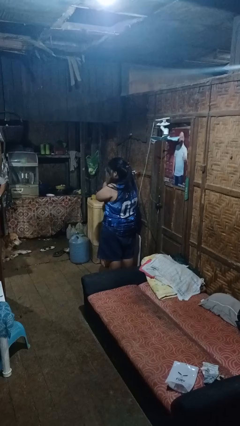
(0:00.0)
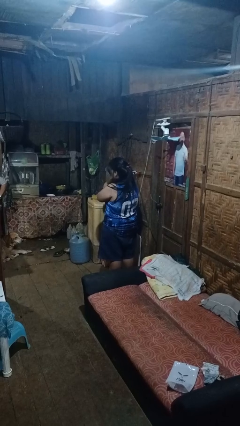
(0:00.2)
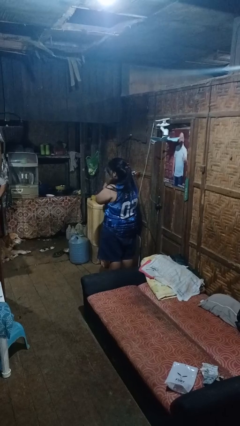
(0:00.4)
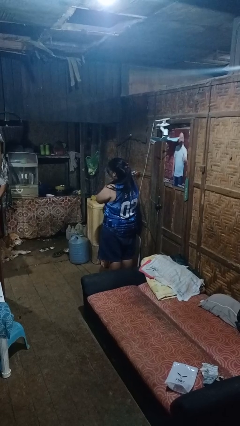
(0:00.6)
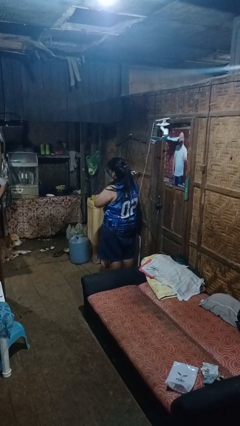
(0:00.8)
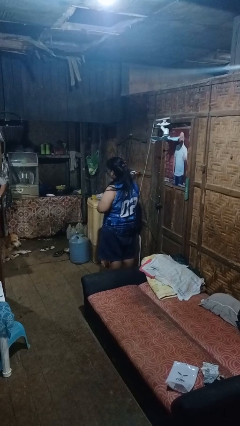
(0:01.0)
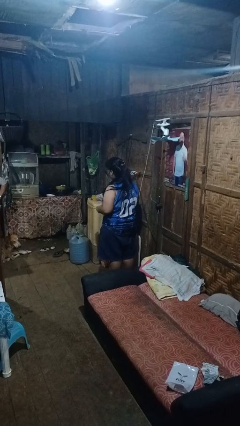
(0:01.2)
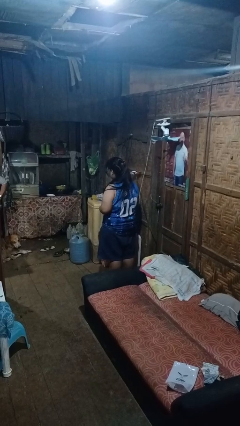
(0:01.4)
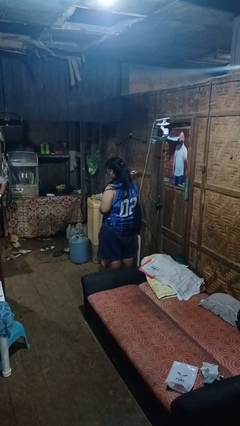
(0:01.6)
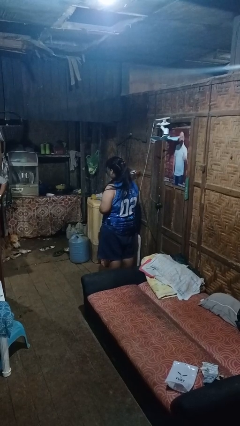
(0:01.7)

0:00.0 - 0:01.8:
person applies deodorant

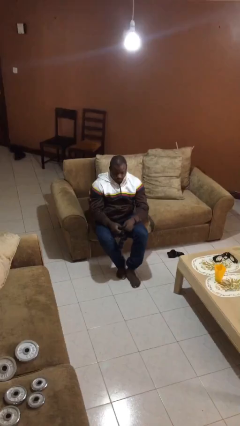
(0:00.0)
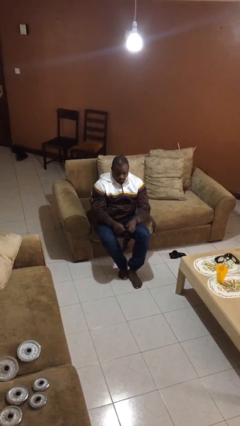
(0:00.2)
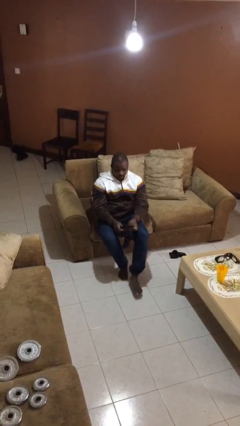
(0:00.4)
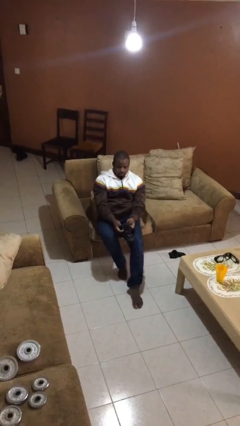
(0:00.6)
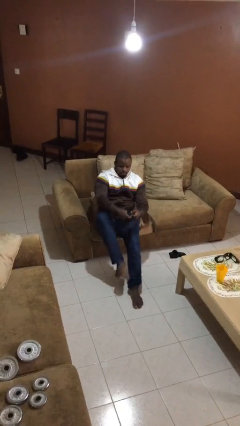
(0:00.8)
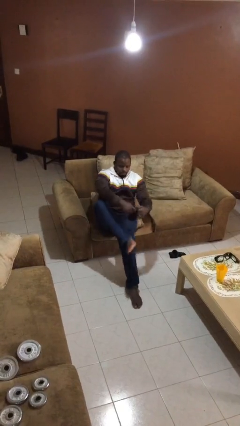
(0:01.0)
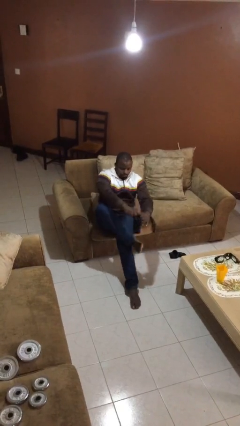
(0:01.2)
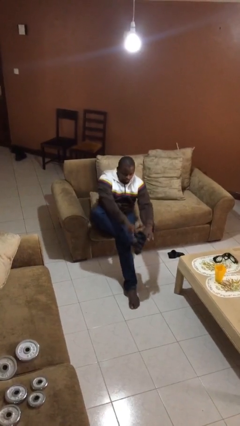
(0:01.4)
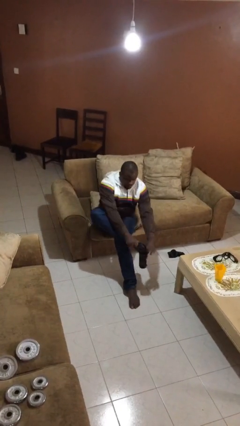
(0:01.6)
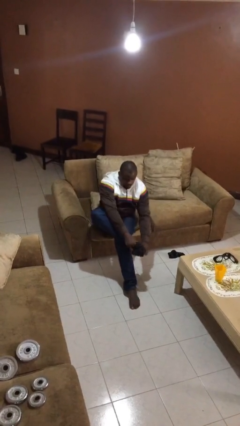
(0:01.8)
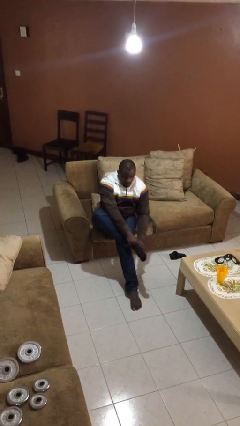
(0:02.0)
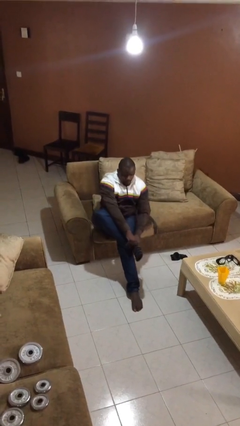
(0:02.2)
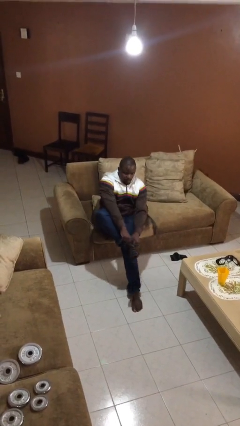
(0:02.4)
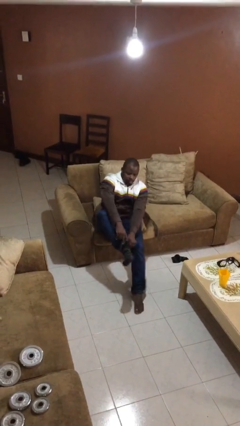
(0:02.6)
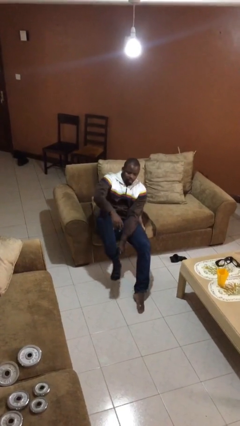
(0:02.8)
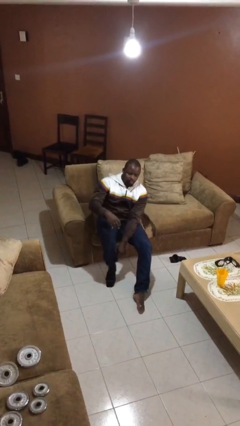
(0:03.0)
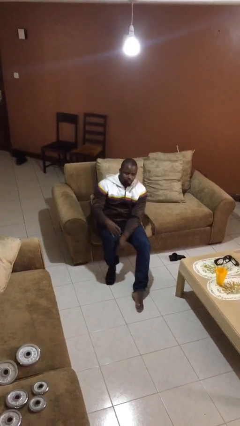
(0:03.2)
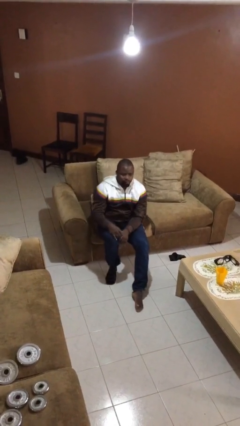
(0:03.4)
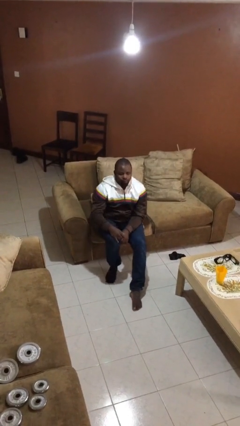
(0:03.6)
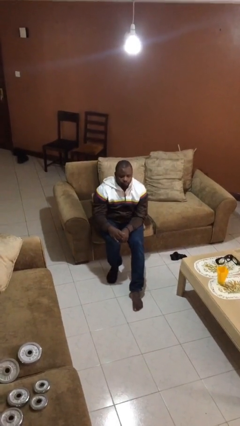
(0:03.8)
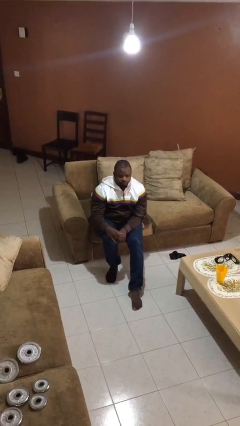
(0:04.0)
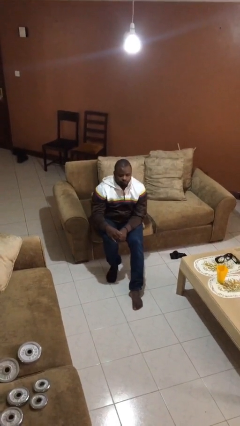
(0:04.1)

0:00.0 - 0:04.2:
person puts on socks

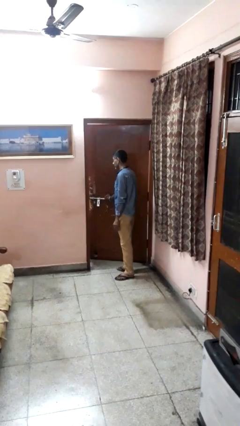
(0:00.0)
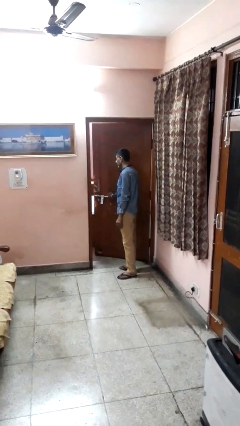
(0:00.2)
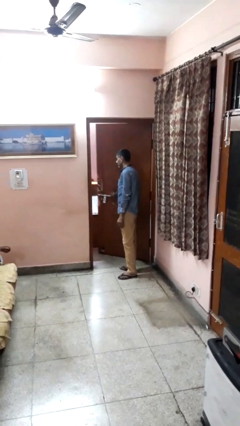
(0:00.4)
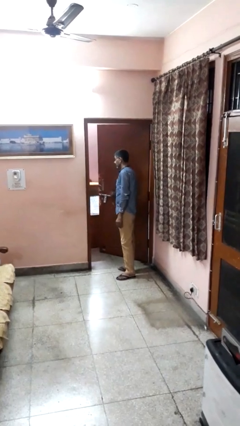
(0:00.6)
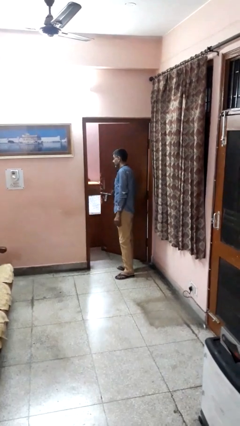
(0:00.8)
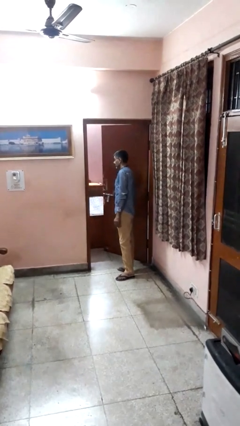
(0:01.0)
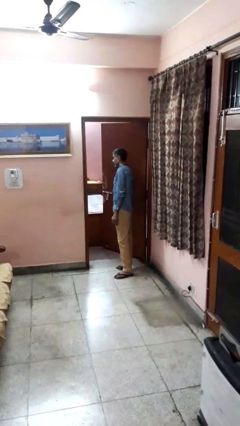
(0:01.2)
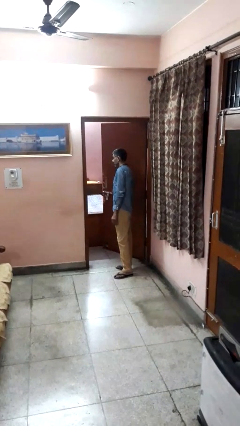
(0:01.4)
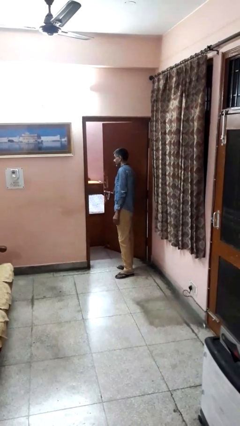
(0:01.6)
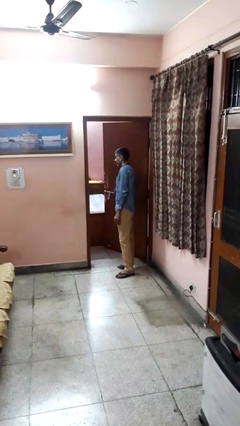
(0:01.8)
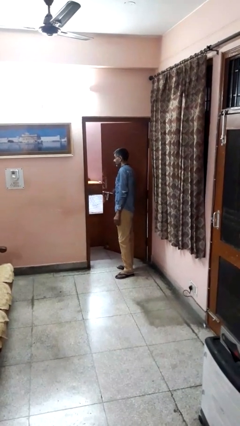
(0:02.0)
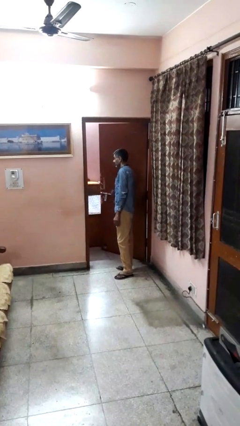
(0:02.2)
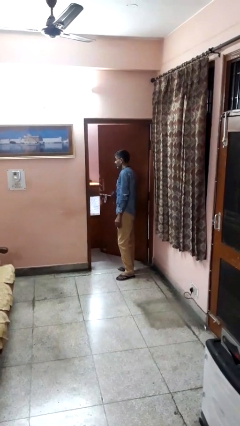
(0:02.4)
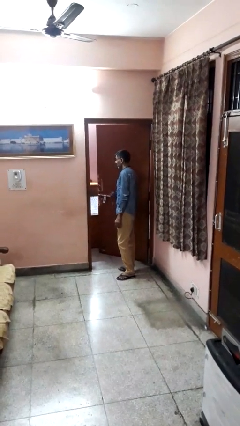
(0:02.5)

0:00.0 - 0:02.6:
person opens facility door

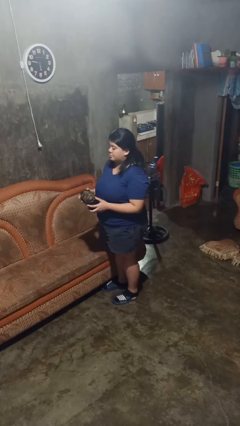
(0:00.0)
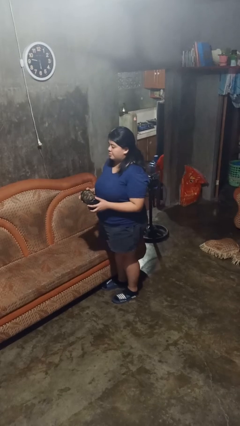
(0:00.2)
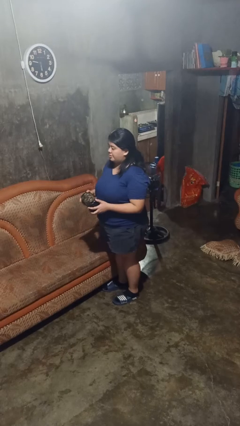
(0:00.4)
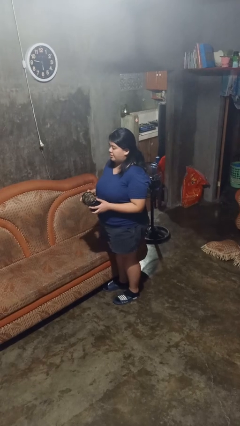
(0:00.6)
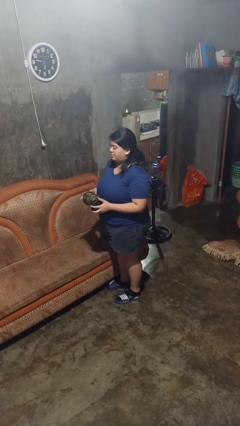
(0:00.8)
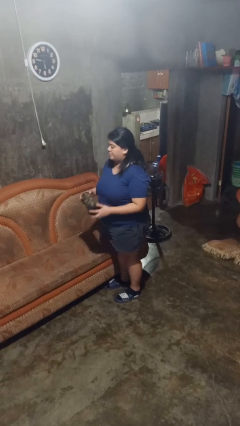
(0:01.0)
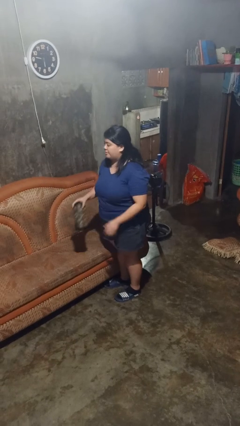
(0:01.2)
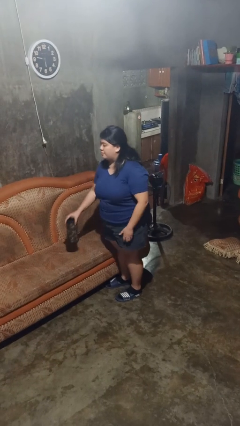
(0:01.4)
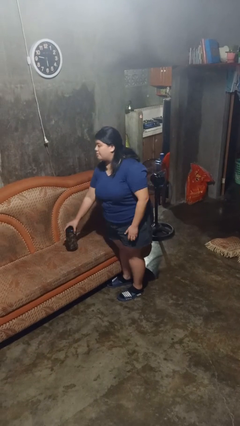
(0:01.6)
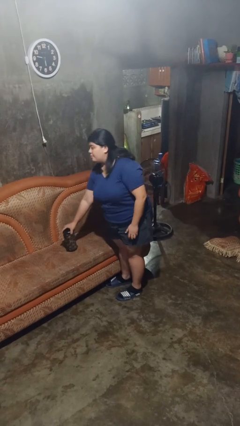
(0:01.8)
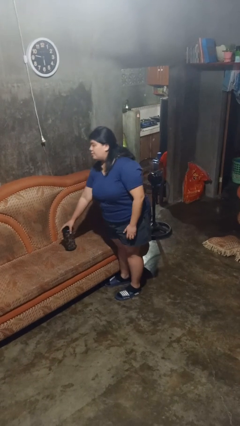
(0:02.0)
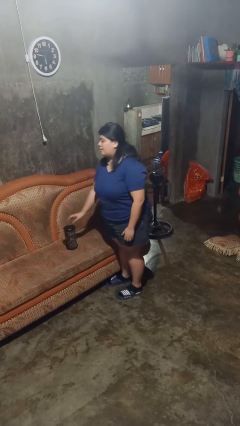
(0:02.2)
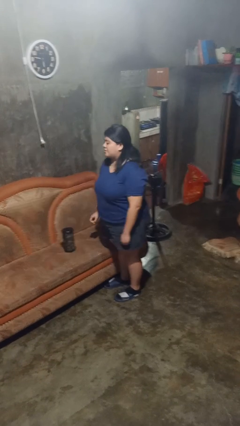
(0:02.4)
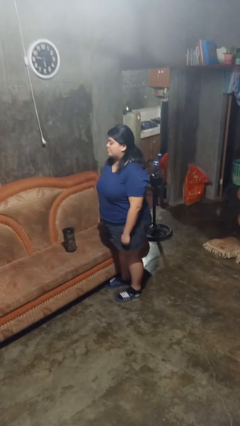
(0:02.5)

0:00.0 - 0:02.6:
person puts down object on couch

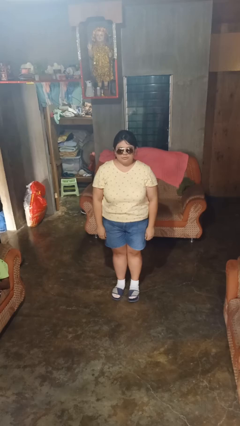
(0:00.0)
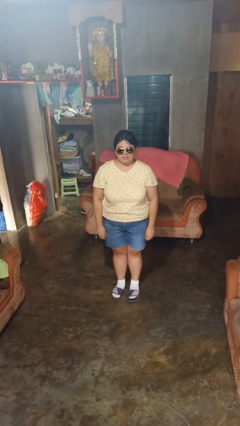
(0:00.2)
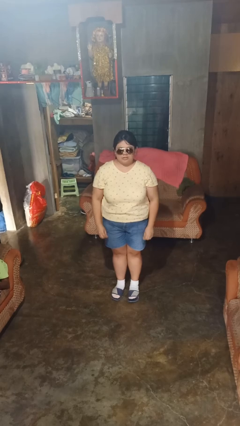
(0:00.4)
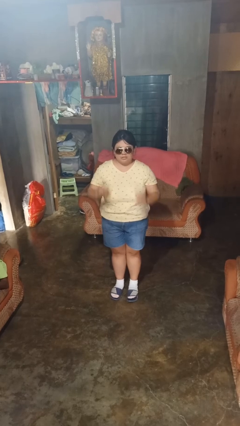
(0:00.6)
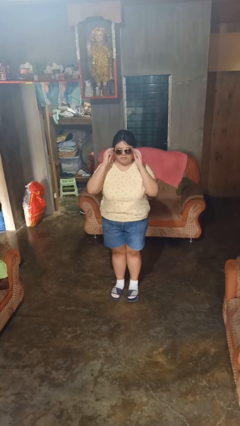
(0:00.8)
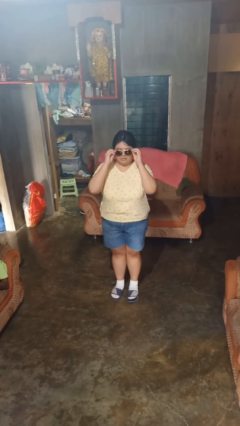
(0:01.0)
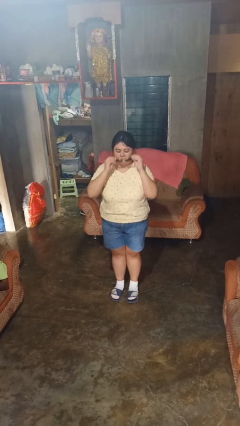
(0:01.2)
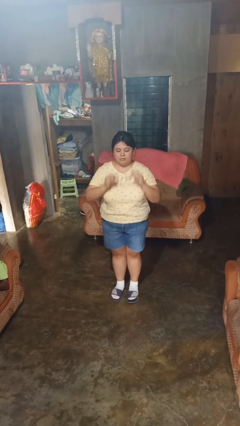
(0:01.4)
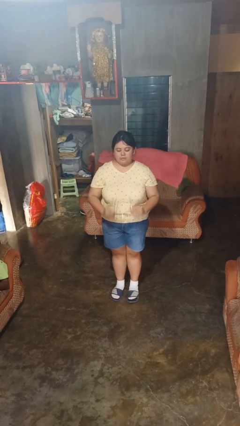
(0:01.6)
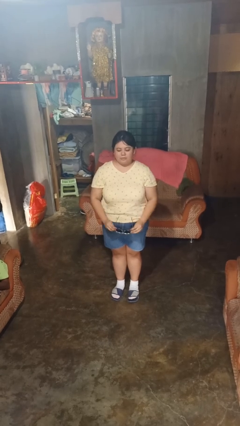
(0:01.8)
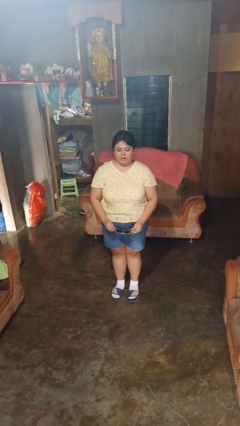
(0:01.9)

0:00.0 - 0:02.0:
person takes off sunglasses

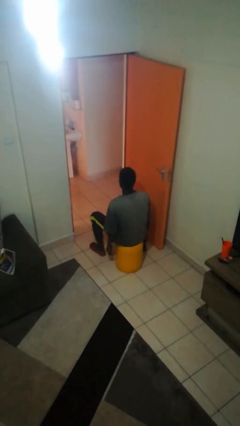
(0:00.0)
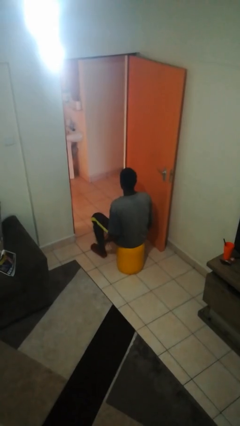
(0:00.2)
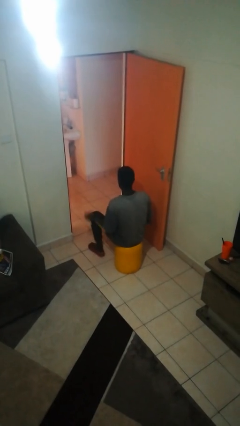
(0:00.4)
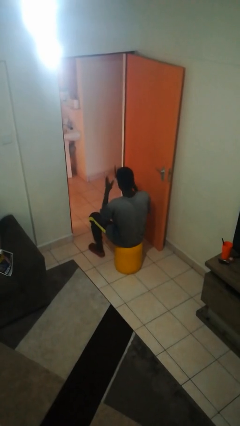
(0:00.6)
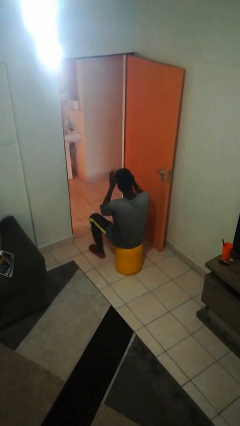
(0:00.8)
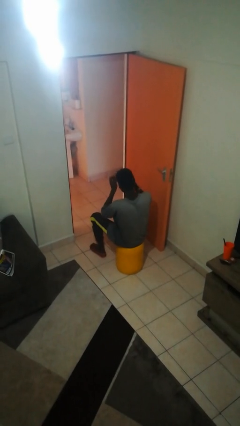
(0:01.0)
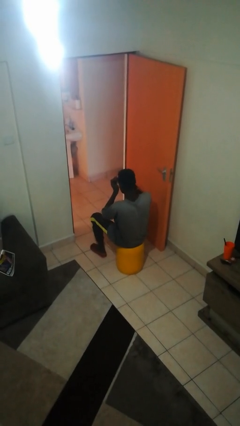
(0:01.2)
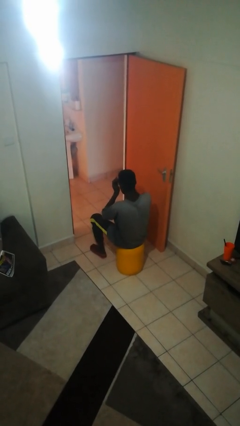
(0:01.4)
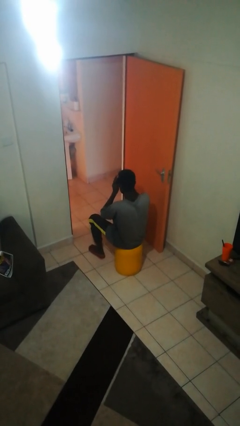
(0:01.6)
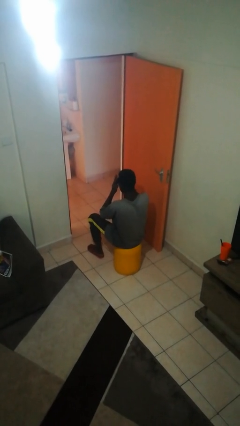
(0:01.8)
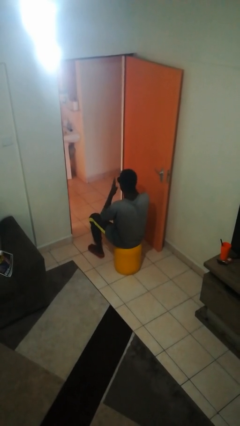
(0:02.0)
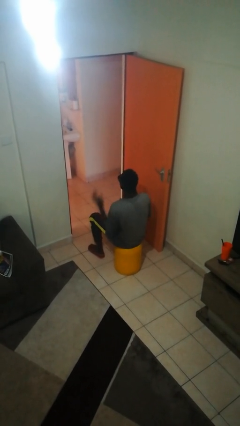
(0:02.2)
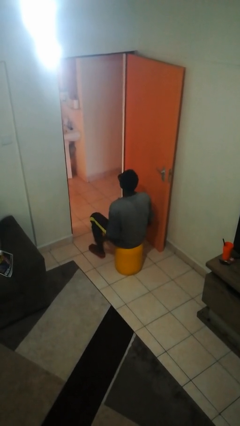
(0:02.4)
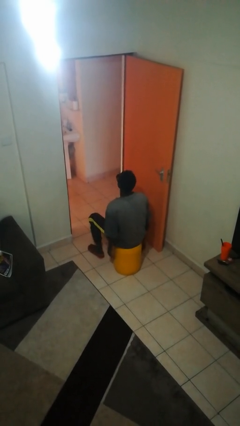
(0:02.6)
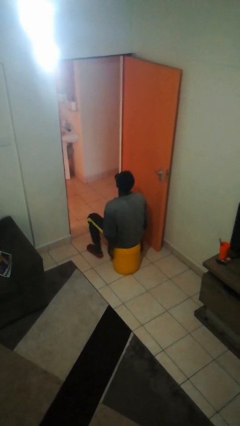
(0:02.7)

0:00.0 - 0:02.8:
person puts on sunglasses

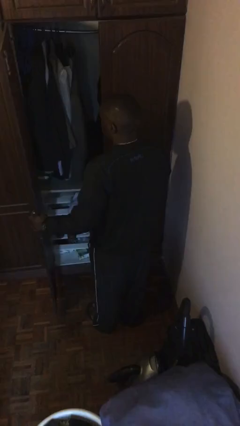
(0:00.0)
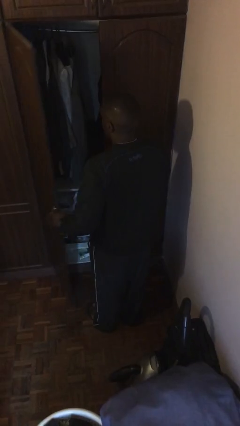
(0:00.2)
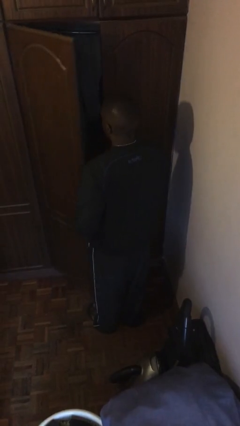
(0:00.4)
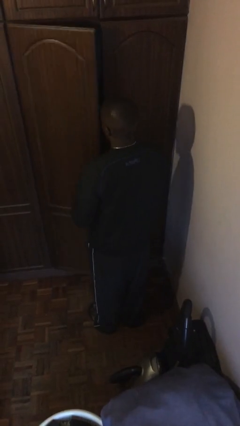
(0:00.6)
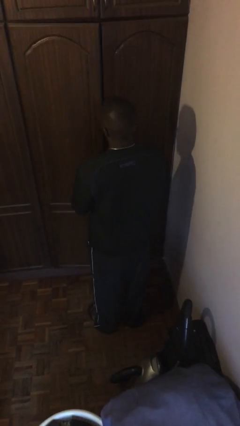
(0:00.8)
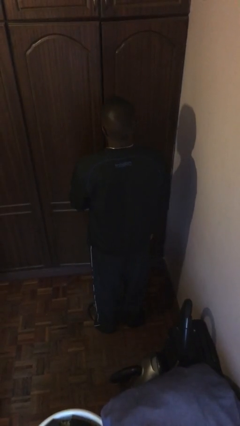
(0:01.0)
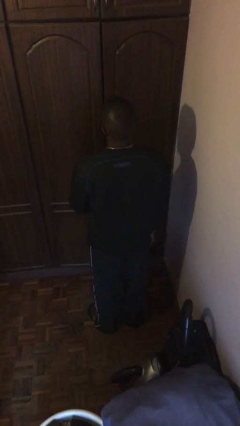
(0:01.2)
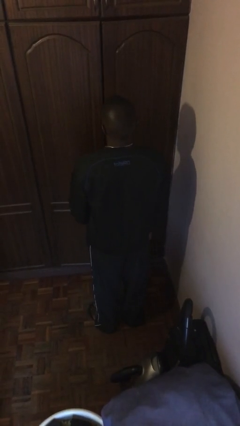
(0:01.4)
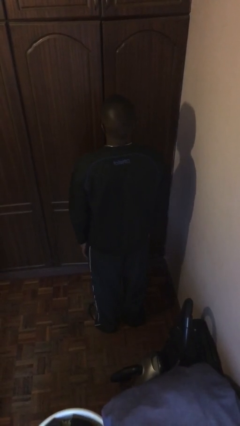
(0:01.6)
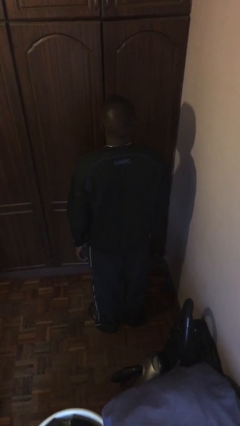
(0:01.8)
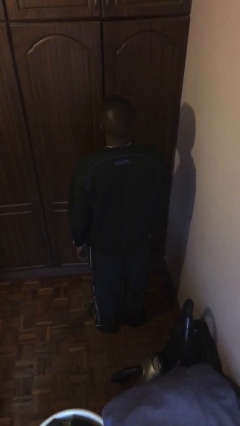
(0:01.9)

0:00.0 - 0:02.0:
person closes closet door
